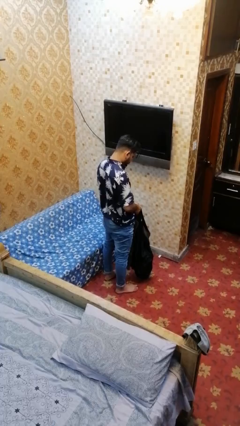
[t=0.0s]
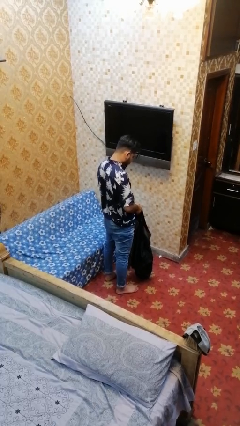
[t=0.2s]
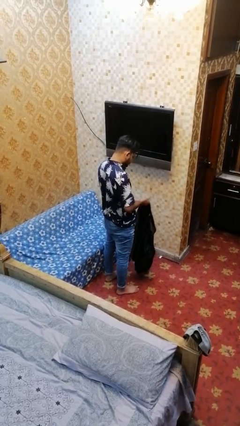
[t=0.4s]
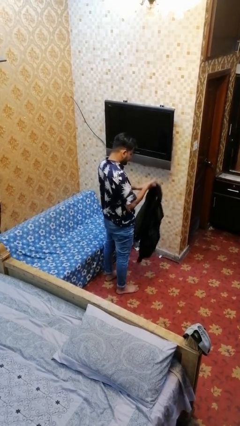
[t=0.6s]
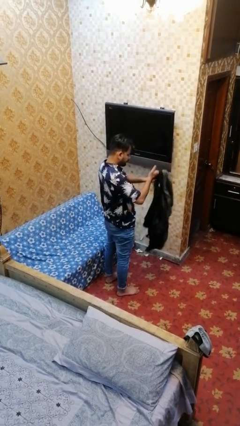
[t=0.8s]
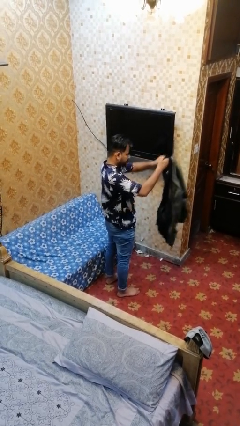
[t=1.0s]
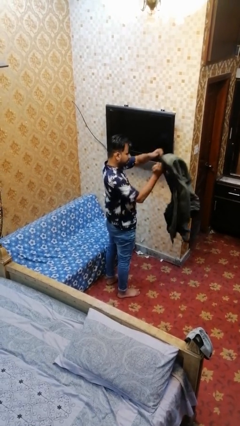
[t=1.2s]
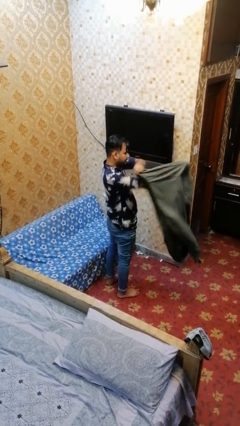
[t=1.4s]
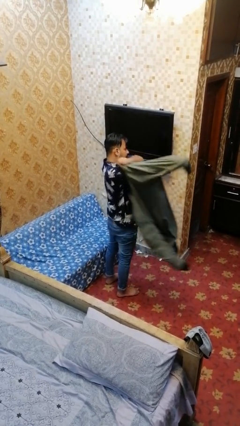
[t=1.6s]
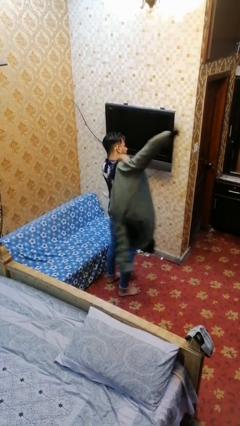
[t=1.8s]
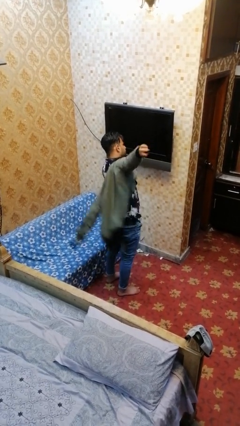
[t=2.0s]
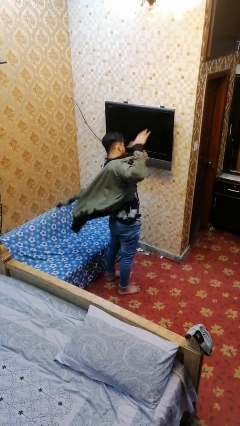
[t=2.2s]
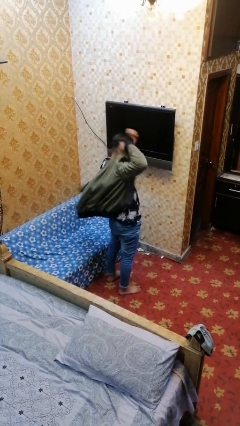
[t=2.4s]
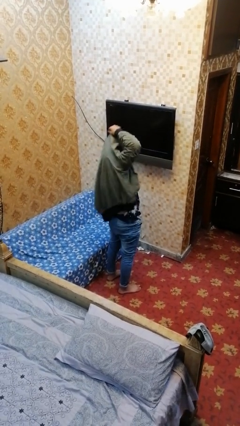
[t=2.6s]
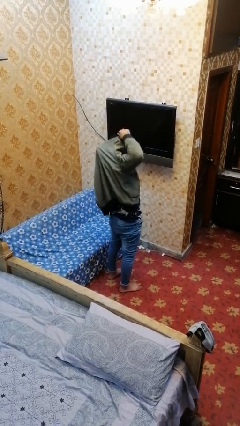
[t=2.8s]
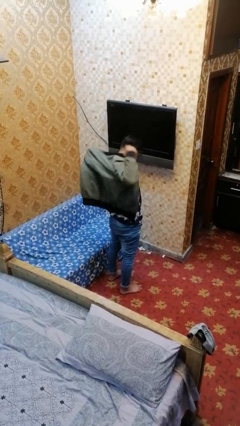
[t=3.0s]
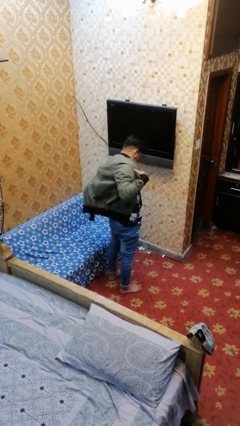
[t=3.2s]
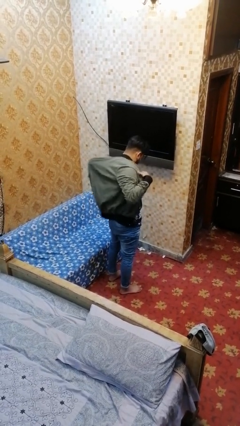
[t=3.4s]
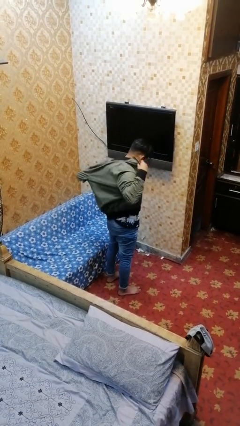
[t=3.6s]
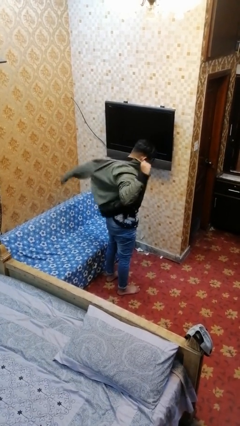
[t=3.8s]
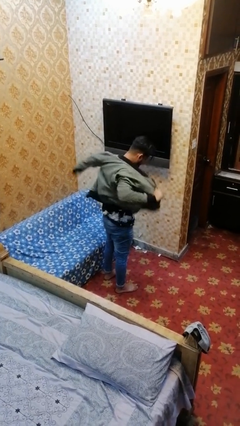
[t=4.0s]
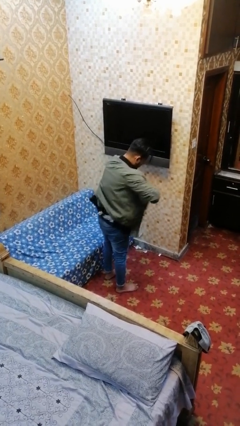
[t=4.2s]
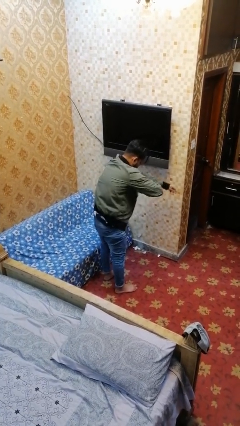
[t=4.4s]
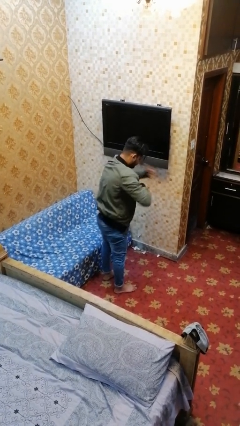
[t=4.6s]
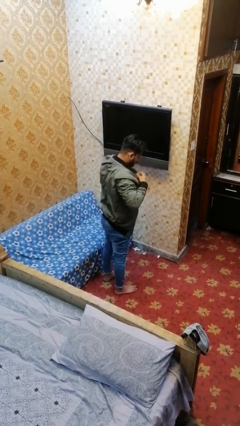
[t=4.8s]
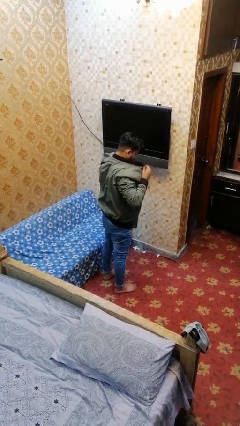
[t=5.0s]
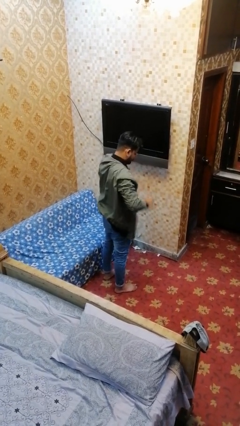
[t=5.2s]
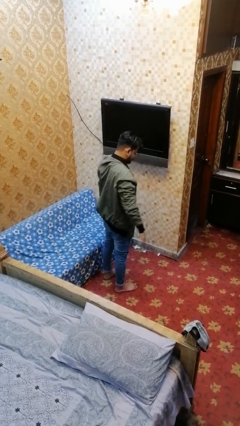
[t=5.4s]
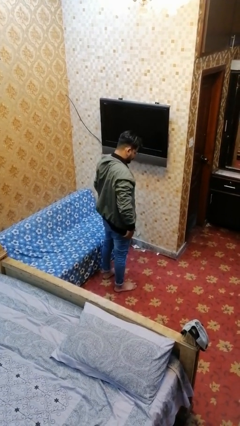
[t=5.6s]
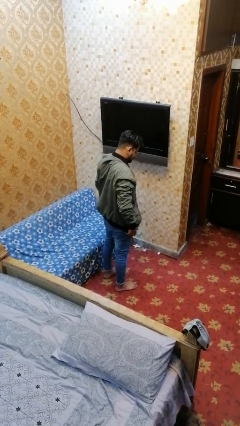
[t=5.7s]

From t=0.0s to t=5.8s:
person puts on jacket

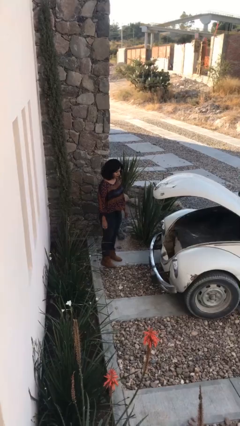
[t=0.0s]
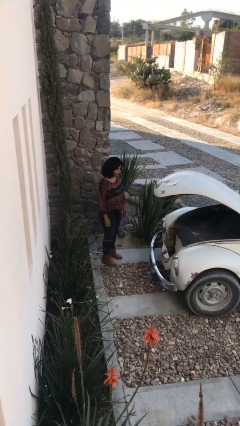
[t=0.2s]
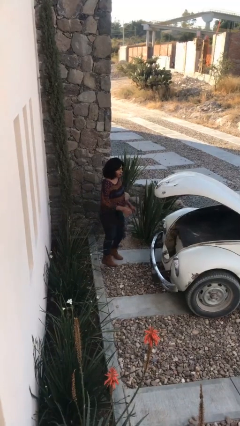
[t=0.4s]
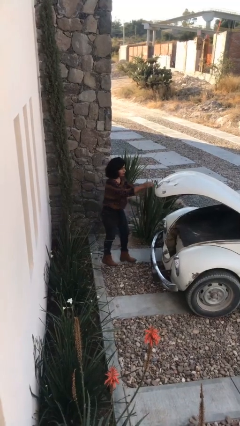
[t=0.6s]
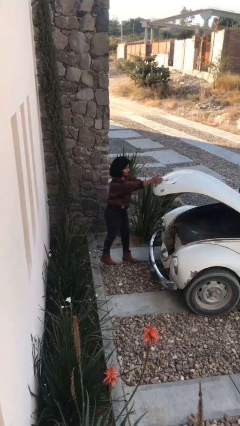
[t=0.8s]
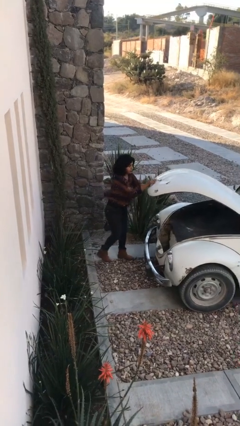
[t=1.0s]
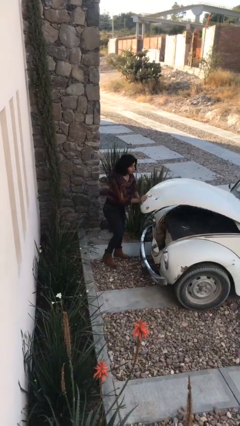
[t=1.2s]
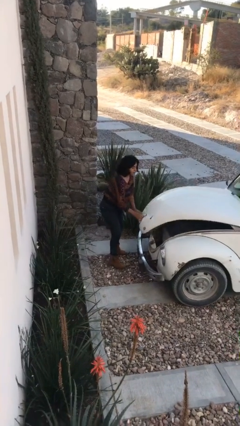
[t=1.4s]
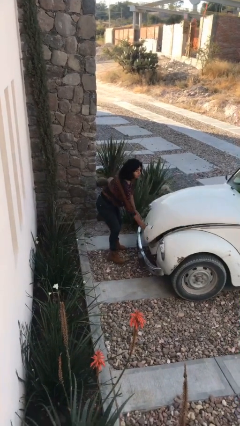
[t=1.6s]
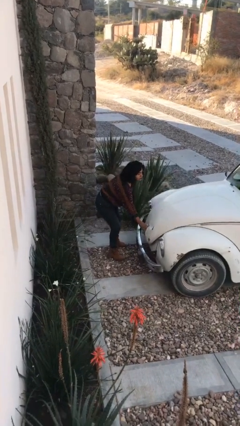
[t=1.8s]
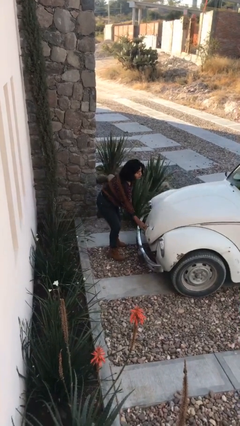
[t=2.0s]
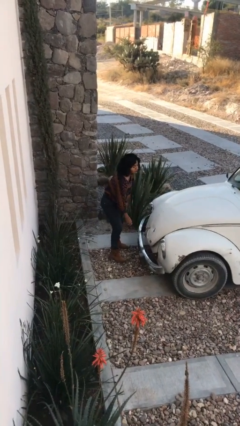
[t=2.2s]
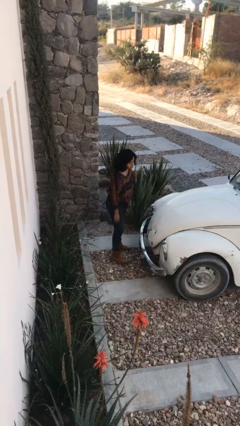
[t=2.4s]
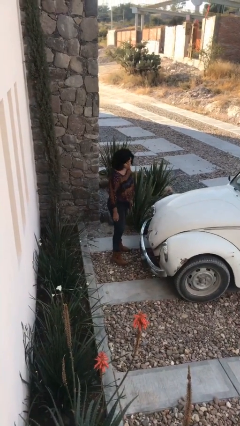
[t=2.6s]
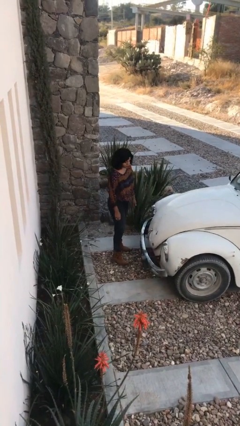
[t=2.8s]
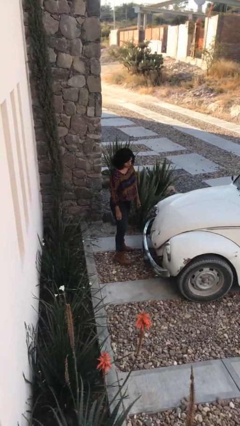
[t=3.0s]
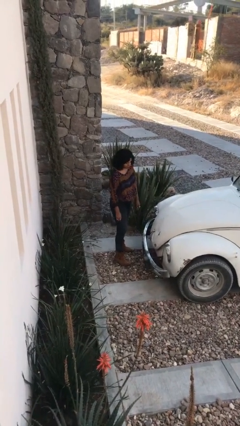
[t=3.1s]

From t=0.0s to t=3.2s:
person closes car trunk

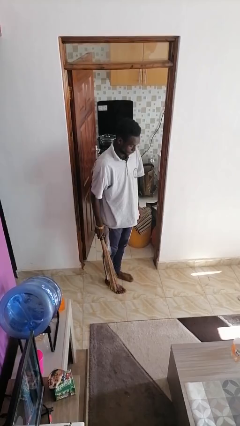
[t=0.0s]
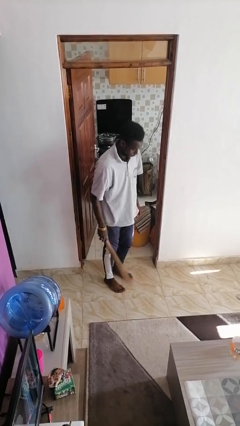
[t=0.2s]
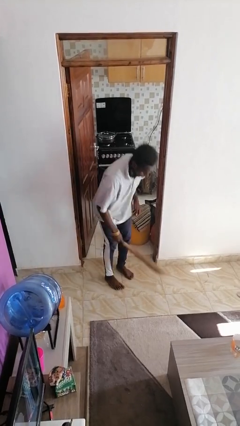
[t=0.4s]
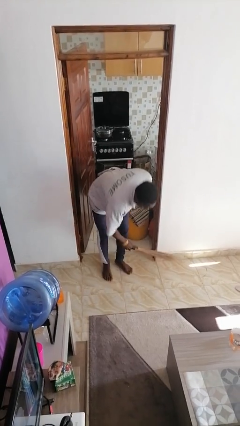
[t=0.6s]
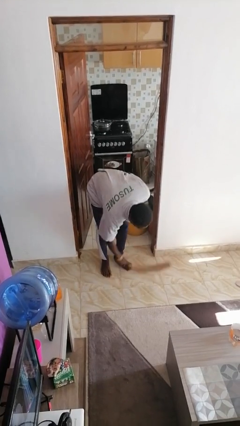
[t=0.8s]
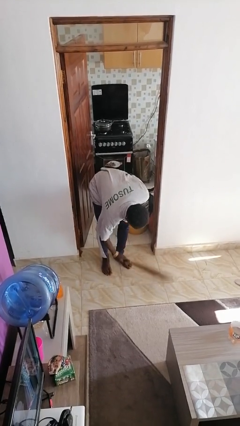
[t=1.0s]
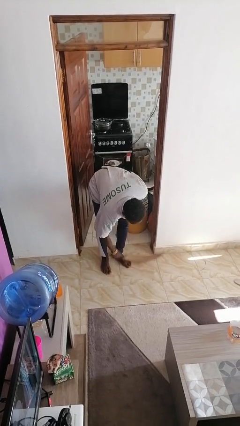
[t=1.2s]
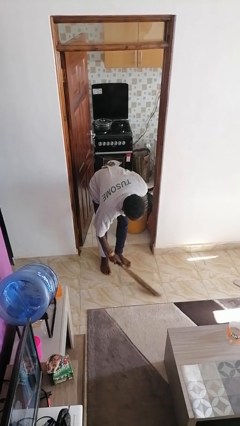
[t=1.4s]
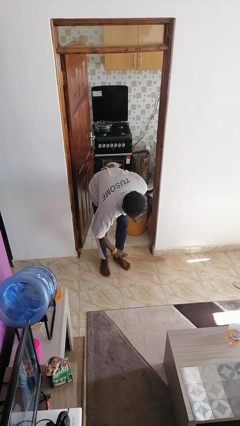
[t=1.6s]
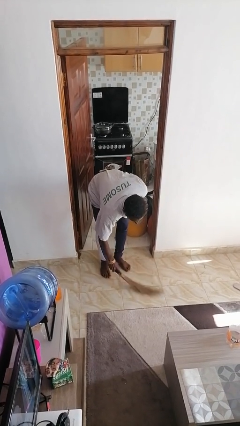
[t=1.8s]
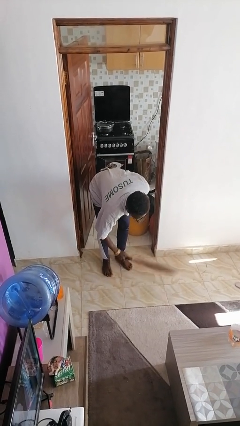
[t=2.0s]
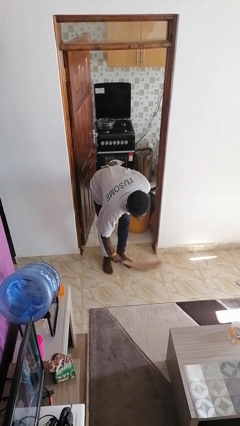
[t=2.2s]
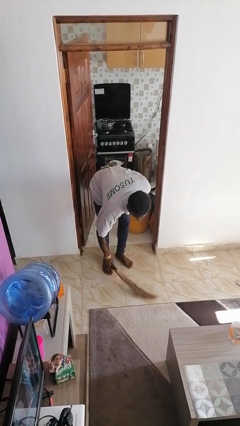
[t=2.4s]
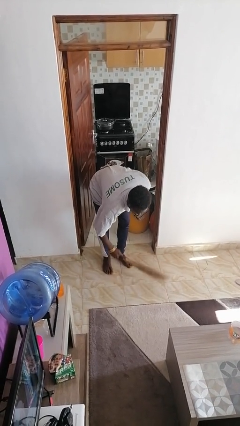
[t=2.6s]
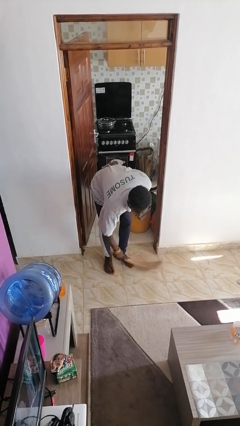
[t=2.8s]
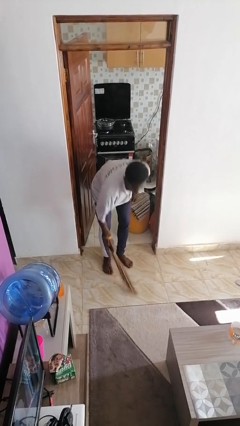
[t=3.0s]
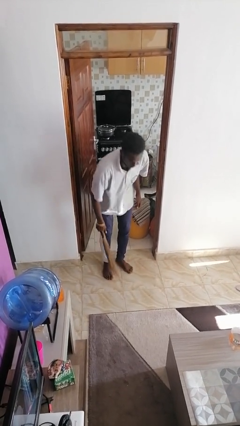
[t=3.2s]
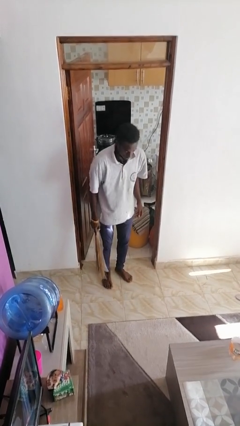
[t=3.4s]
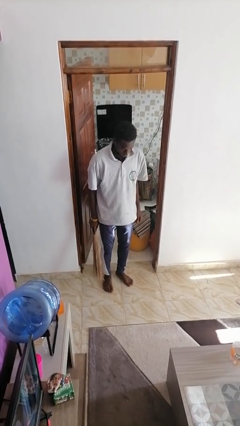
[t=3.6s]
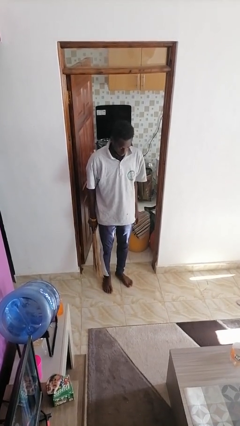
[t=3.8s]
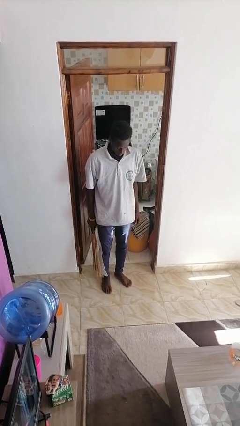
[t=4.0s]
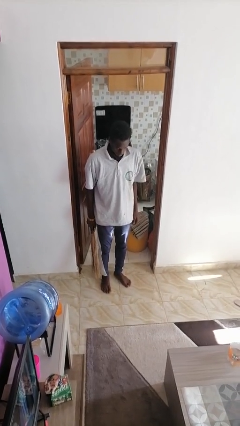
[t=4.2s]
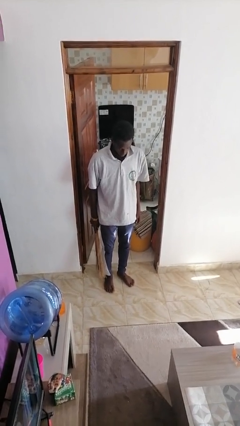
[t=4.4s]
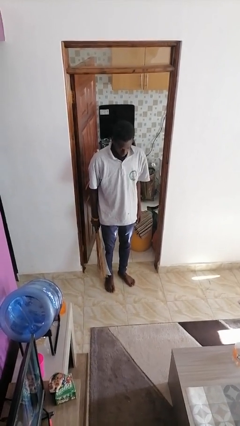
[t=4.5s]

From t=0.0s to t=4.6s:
person sweeps floor

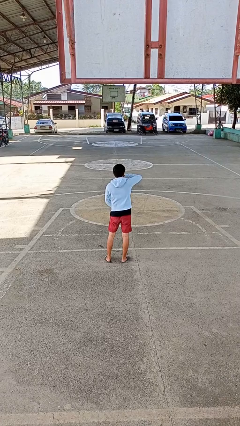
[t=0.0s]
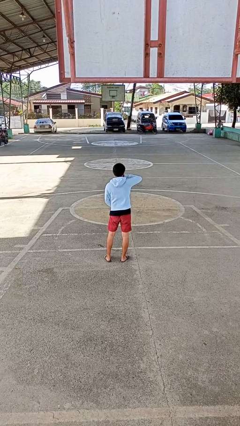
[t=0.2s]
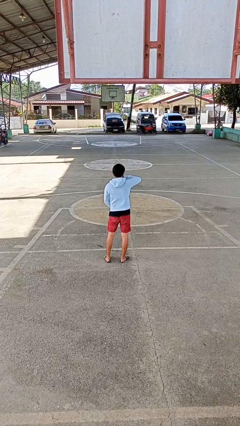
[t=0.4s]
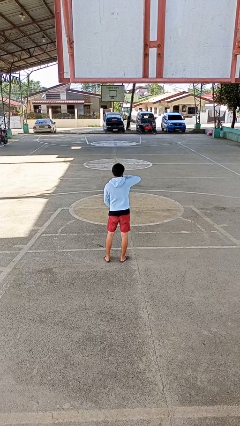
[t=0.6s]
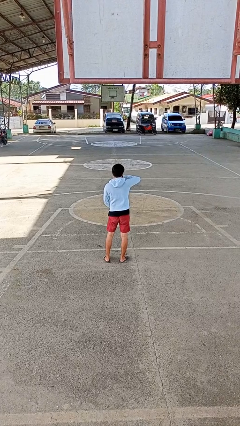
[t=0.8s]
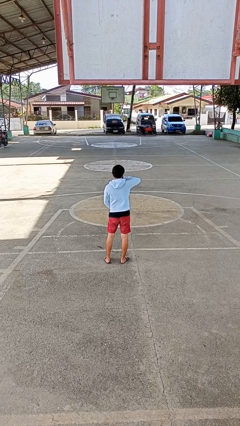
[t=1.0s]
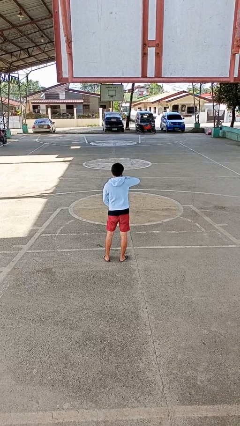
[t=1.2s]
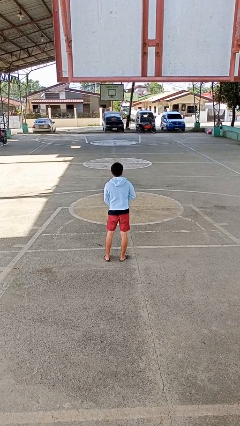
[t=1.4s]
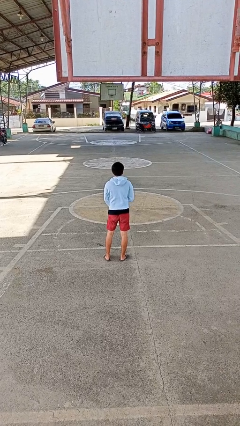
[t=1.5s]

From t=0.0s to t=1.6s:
person zips up jacket

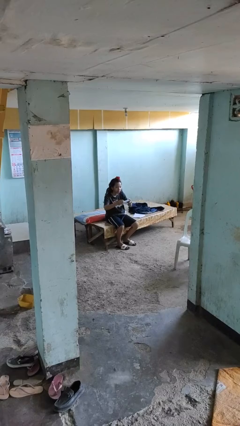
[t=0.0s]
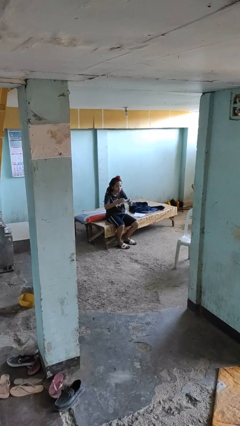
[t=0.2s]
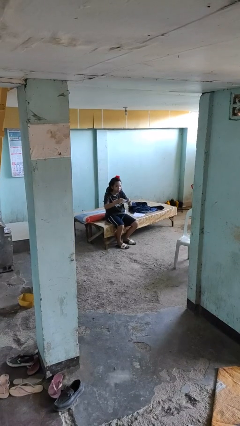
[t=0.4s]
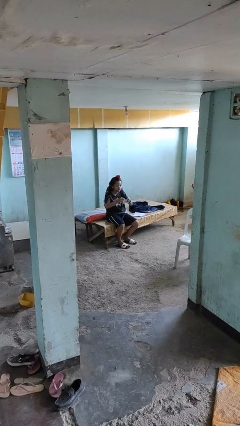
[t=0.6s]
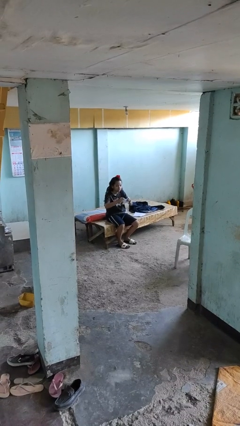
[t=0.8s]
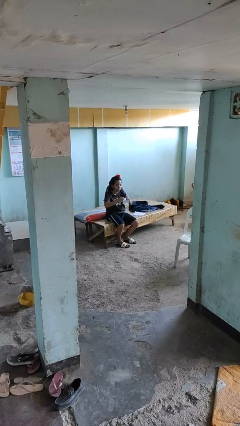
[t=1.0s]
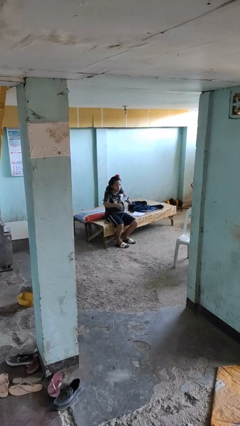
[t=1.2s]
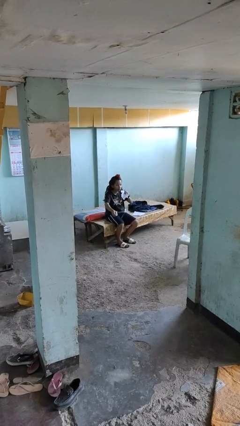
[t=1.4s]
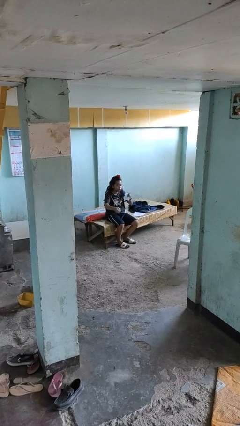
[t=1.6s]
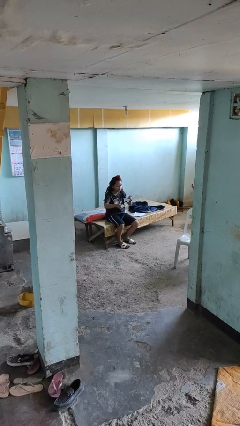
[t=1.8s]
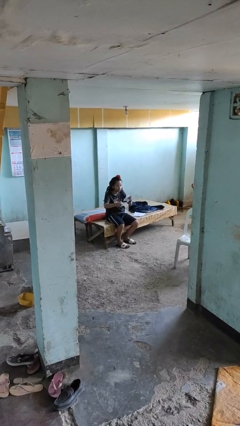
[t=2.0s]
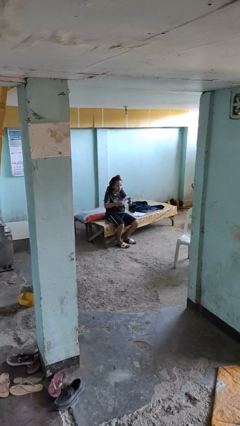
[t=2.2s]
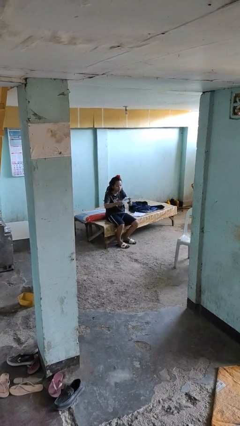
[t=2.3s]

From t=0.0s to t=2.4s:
person tears paper

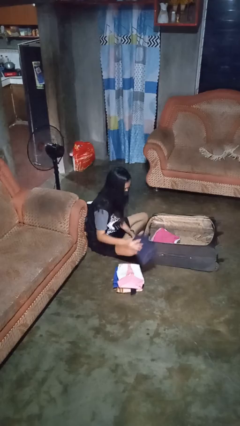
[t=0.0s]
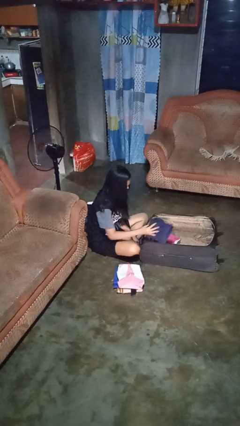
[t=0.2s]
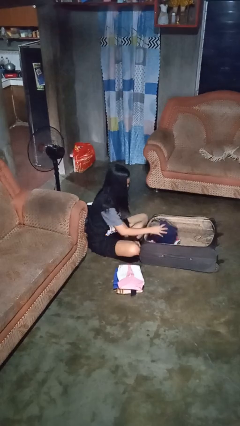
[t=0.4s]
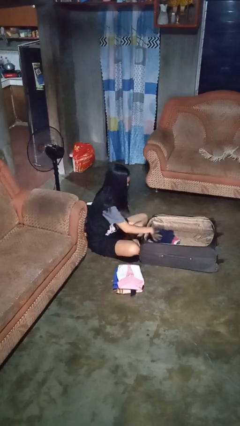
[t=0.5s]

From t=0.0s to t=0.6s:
person loads clothes into suitcase
